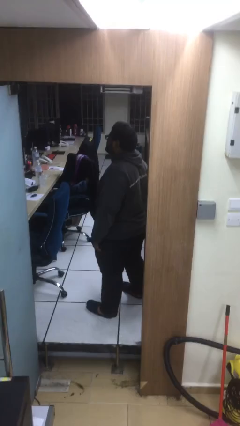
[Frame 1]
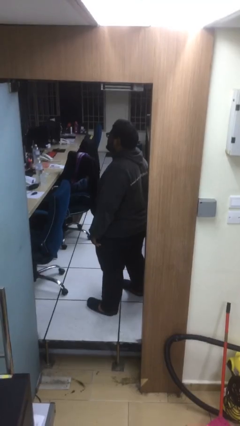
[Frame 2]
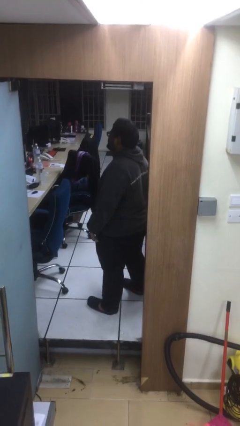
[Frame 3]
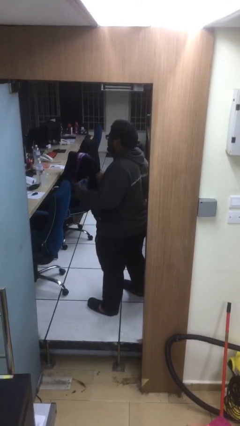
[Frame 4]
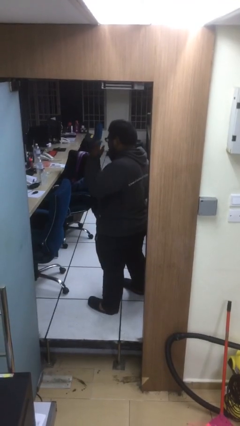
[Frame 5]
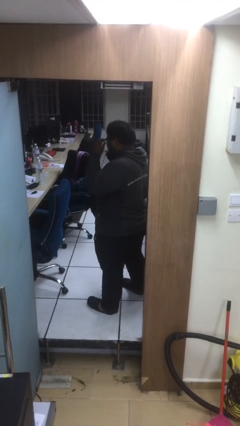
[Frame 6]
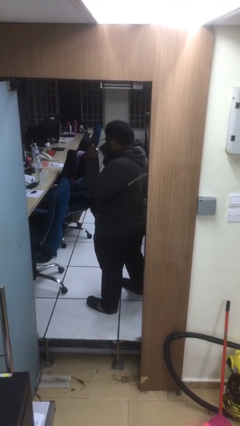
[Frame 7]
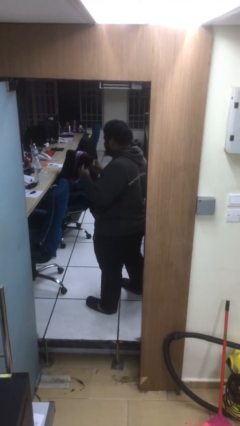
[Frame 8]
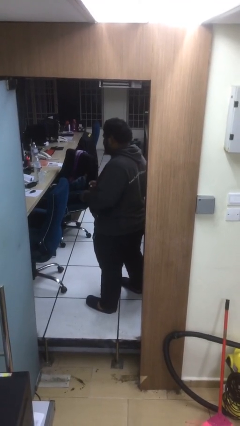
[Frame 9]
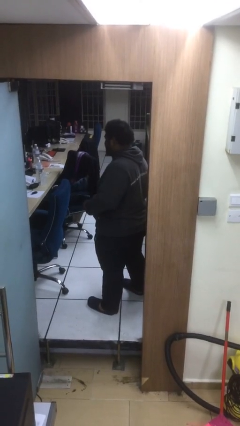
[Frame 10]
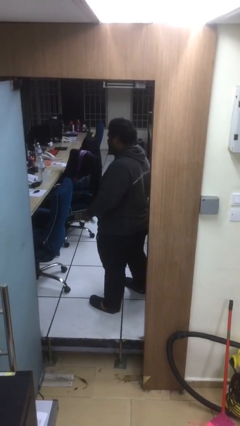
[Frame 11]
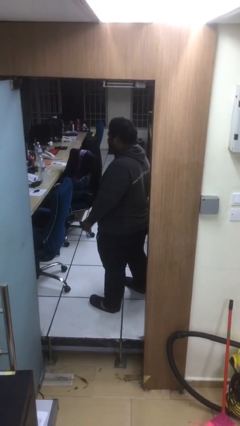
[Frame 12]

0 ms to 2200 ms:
person takes off glasses

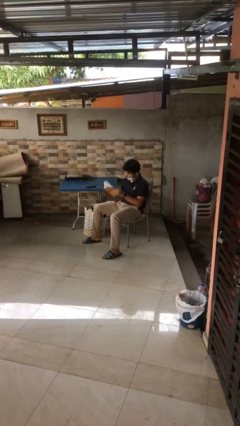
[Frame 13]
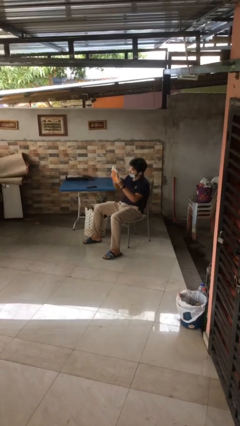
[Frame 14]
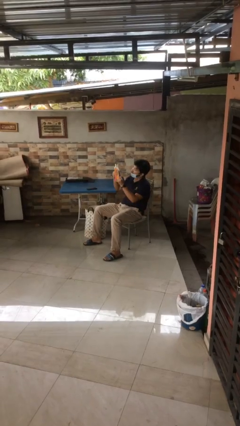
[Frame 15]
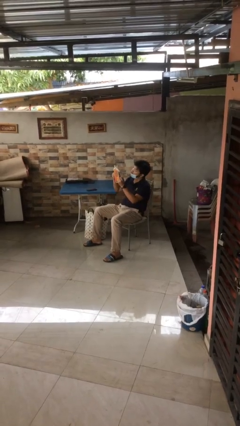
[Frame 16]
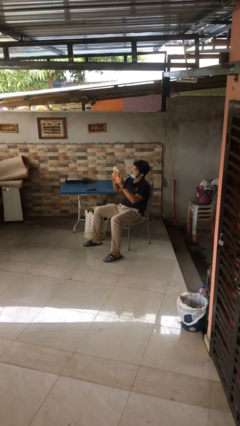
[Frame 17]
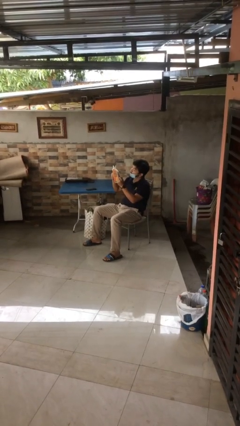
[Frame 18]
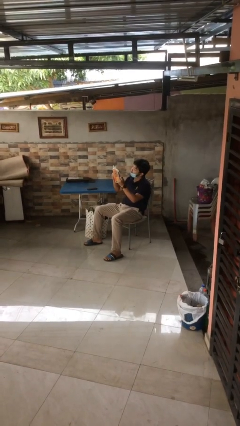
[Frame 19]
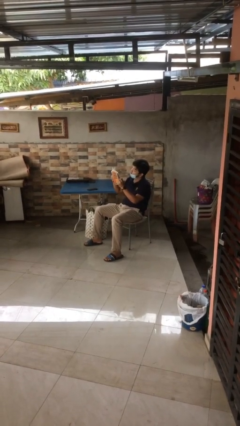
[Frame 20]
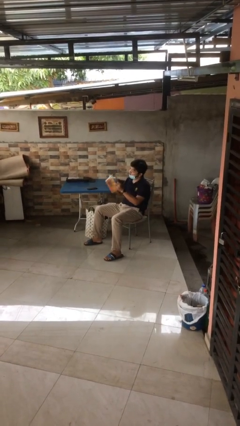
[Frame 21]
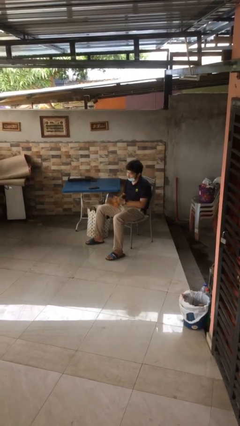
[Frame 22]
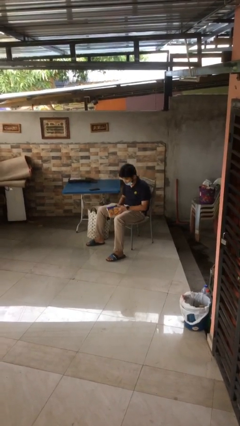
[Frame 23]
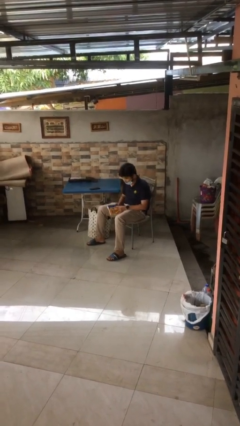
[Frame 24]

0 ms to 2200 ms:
person reads book

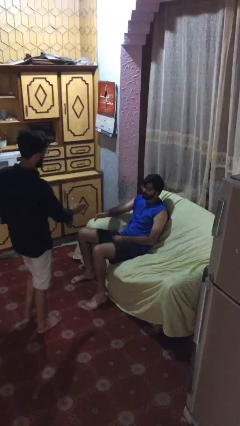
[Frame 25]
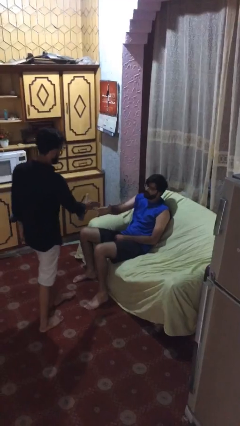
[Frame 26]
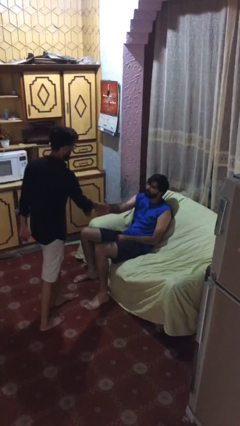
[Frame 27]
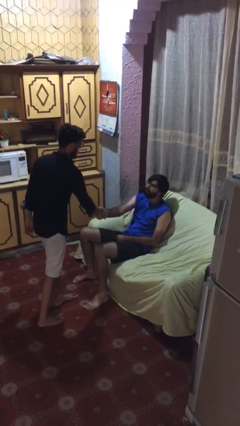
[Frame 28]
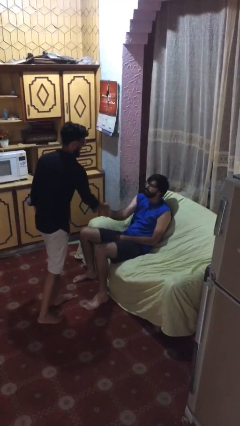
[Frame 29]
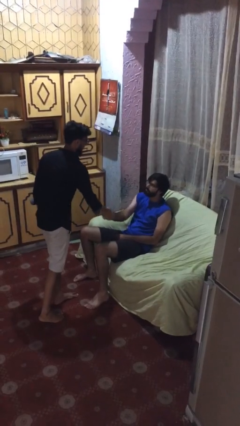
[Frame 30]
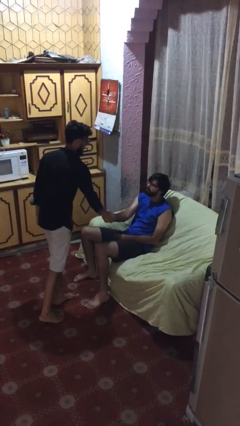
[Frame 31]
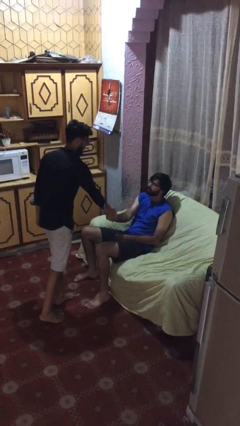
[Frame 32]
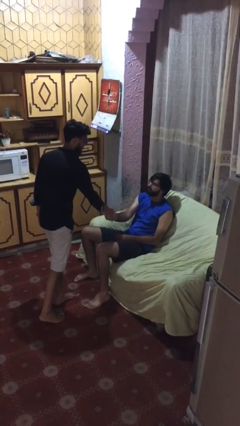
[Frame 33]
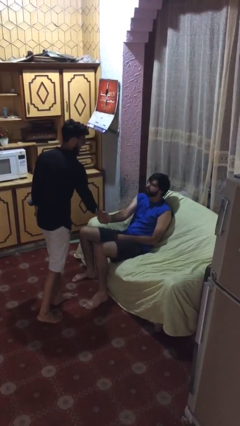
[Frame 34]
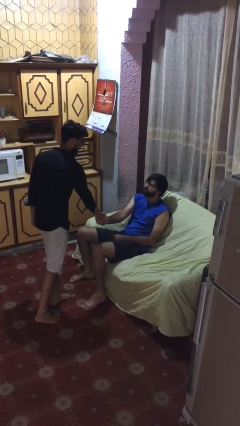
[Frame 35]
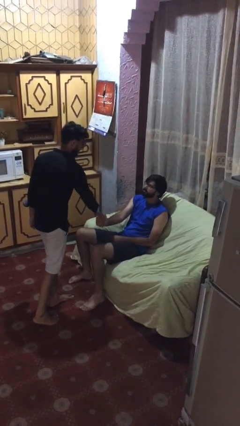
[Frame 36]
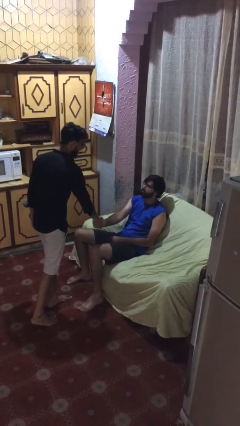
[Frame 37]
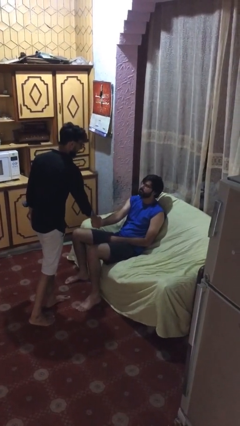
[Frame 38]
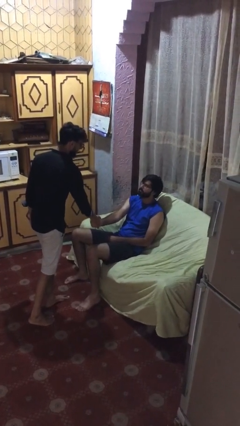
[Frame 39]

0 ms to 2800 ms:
person shakes hand

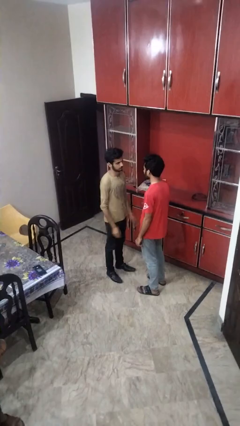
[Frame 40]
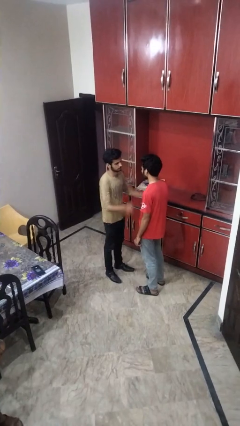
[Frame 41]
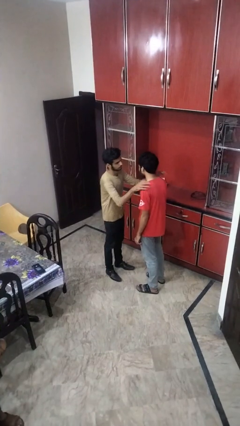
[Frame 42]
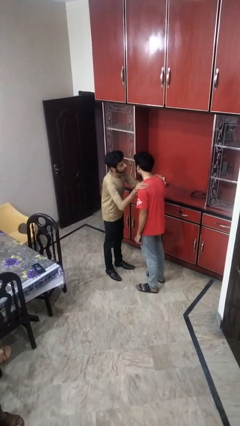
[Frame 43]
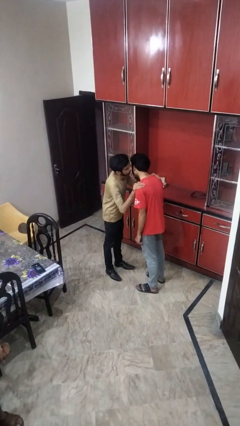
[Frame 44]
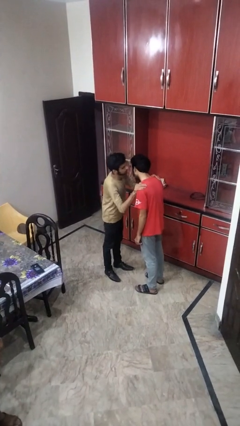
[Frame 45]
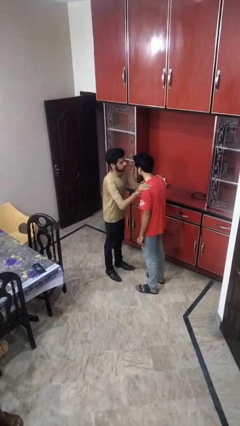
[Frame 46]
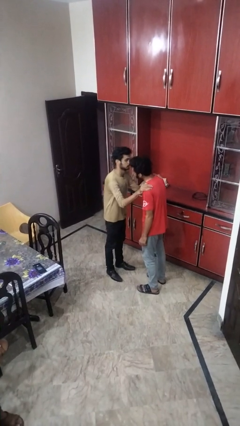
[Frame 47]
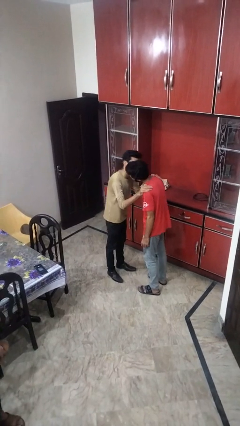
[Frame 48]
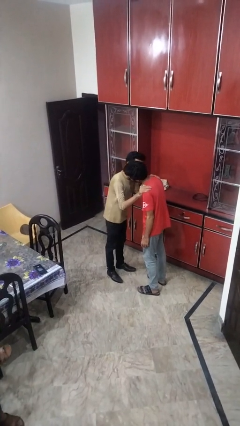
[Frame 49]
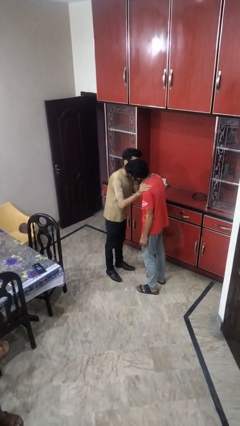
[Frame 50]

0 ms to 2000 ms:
person shoves person

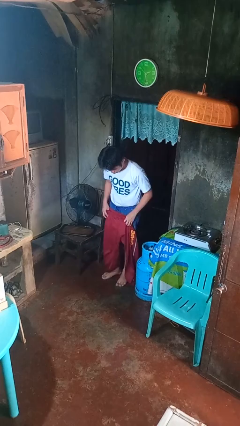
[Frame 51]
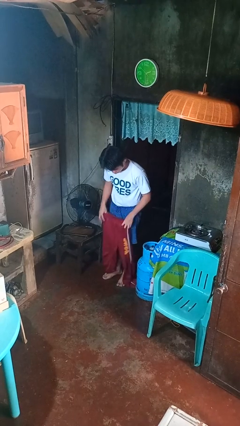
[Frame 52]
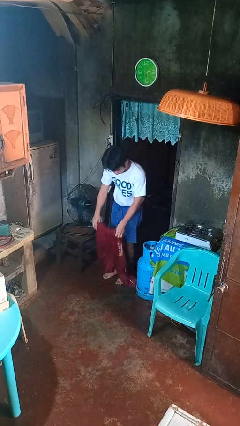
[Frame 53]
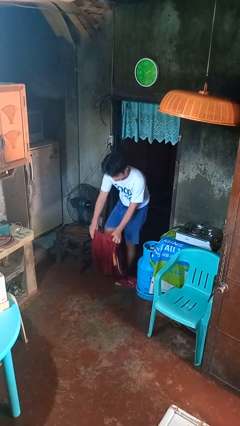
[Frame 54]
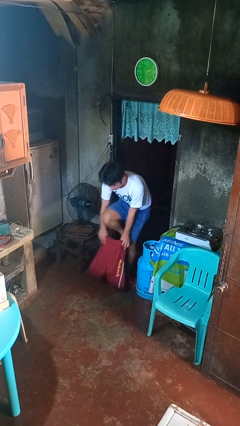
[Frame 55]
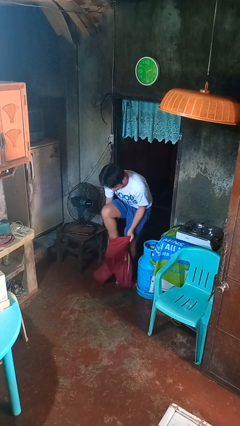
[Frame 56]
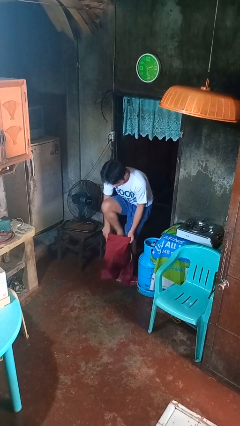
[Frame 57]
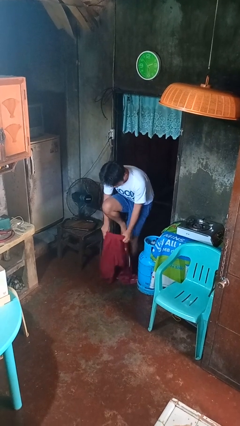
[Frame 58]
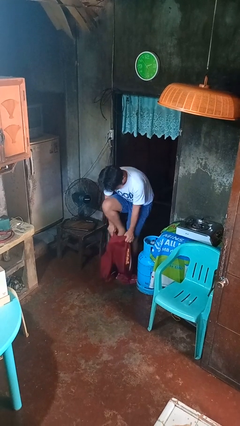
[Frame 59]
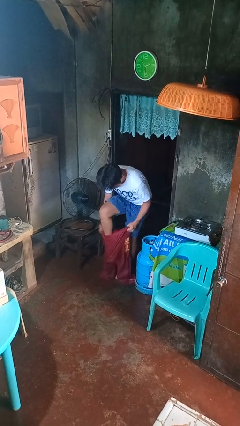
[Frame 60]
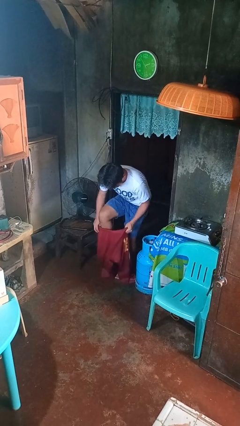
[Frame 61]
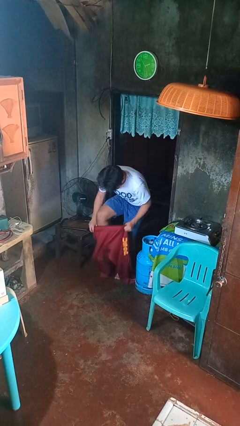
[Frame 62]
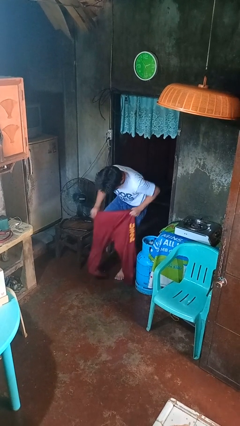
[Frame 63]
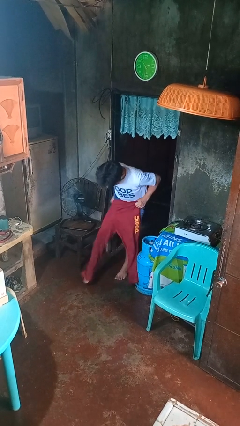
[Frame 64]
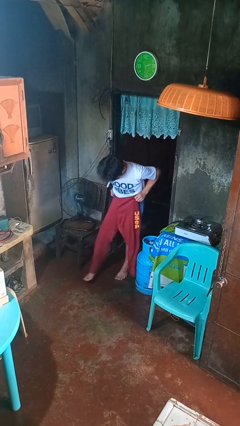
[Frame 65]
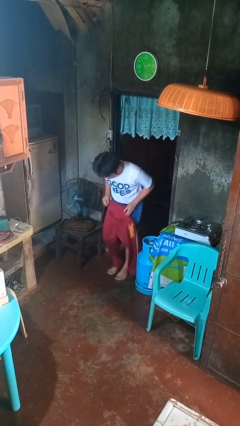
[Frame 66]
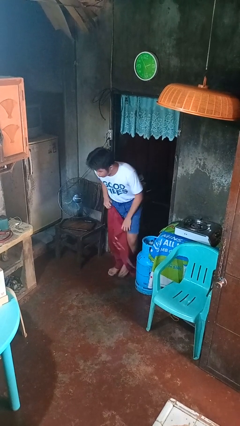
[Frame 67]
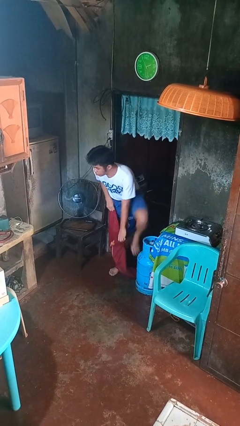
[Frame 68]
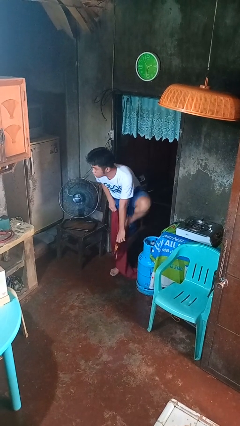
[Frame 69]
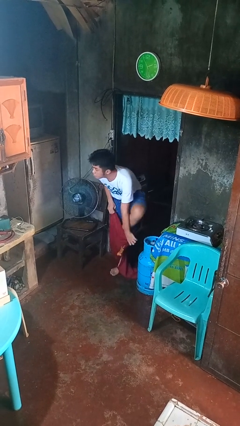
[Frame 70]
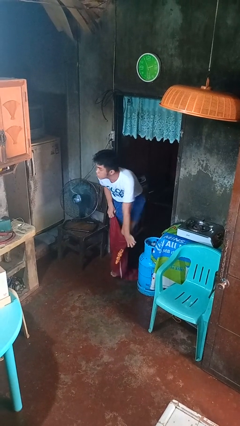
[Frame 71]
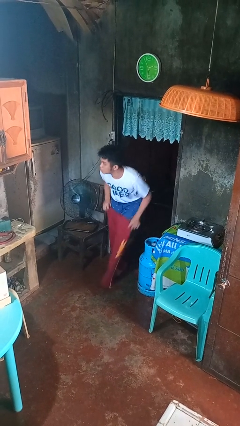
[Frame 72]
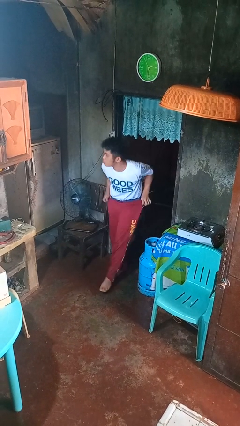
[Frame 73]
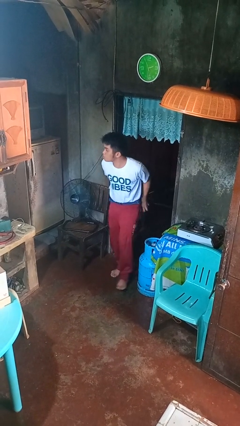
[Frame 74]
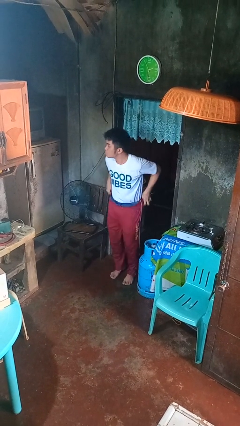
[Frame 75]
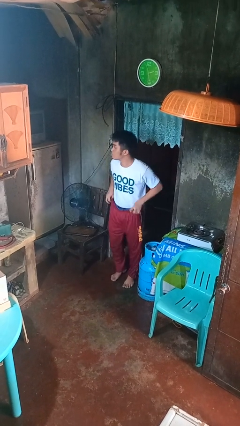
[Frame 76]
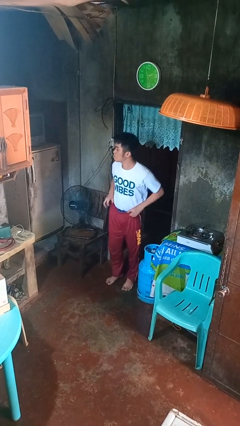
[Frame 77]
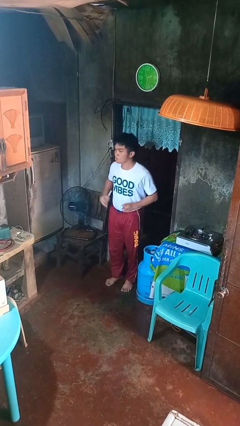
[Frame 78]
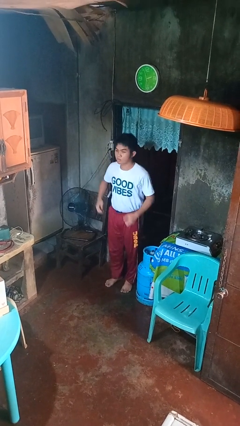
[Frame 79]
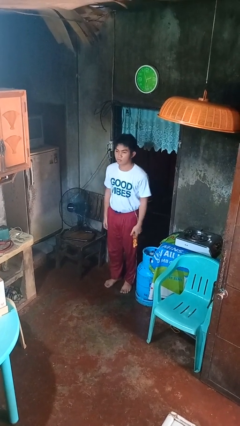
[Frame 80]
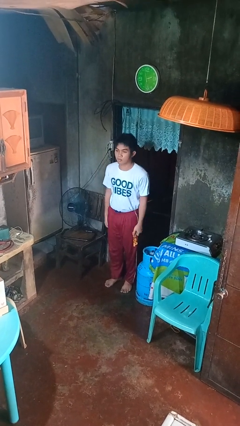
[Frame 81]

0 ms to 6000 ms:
person puts on pants

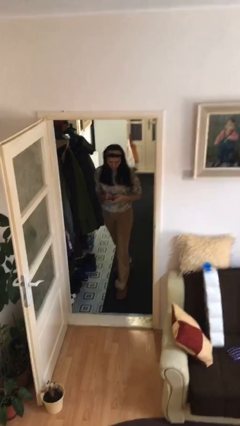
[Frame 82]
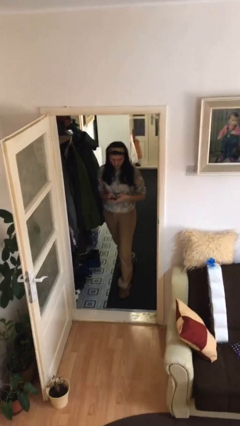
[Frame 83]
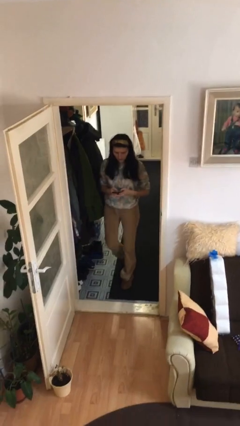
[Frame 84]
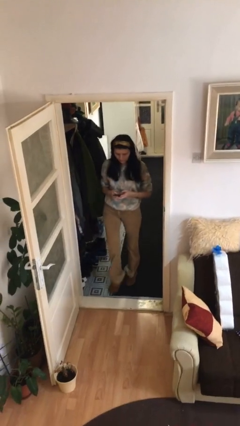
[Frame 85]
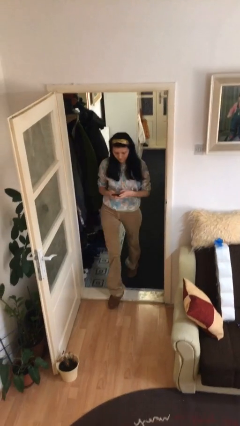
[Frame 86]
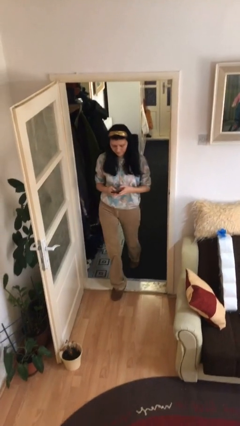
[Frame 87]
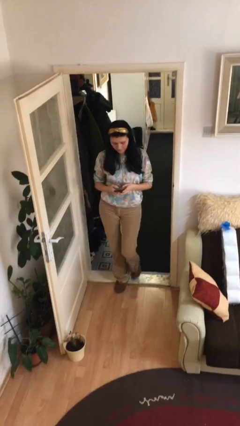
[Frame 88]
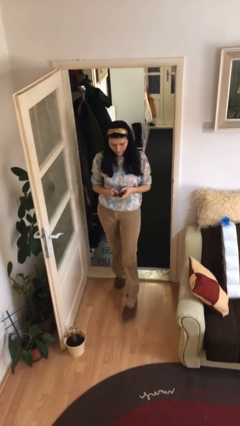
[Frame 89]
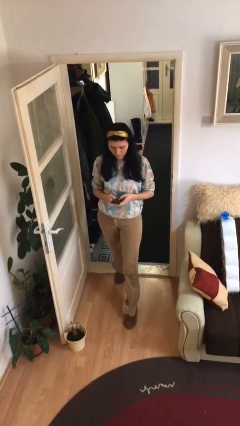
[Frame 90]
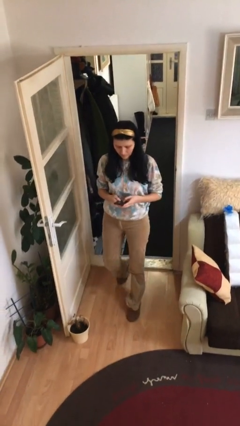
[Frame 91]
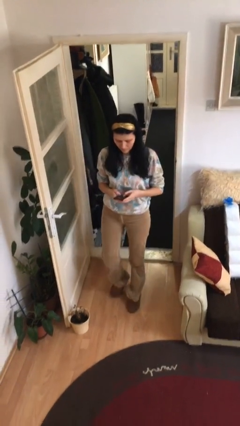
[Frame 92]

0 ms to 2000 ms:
person enters scene through structure

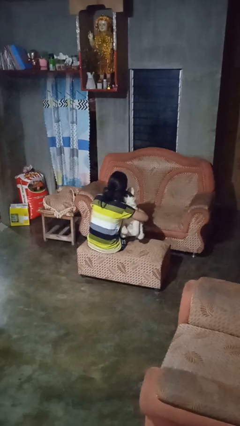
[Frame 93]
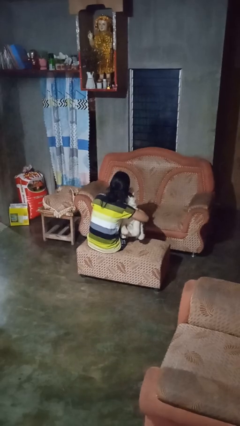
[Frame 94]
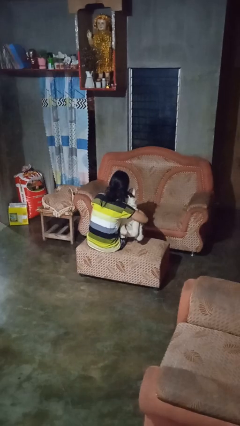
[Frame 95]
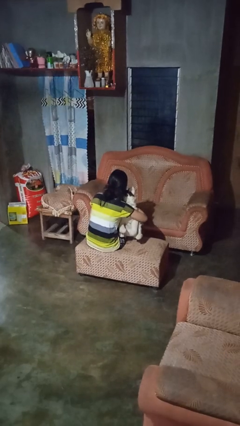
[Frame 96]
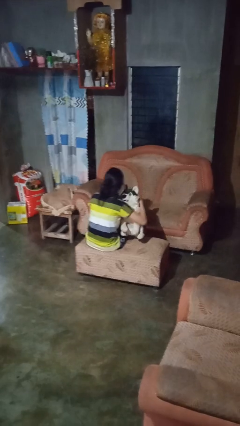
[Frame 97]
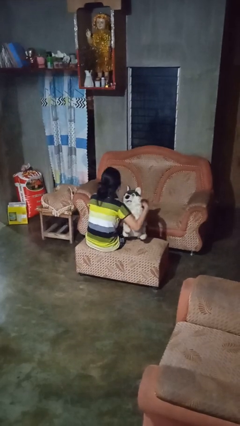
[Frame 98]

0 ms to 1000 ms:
person hugs stuffed animal
